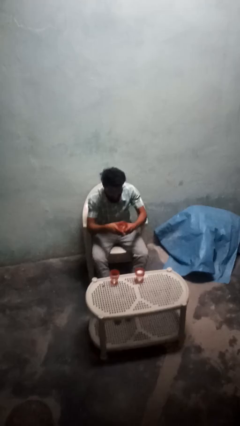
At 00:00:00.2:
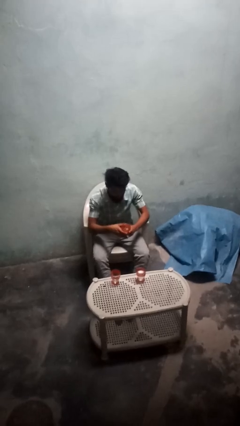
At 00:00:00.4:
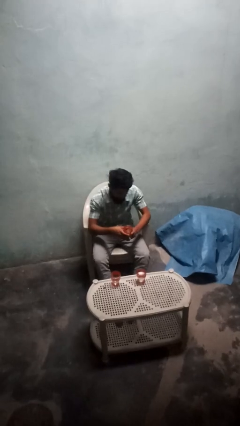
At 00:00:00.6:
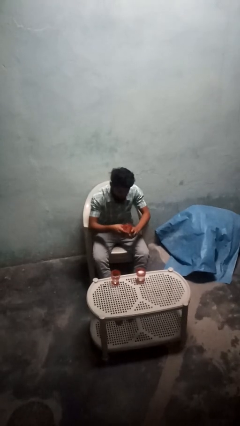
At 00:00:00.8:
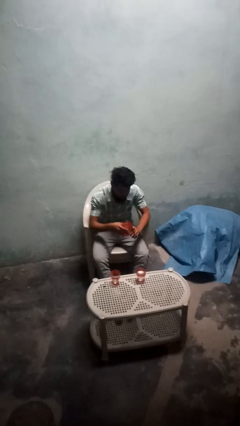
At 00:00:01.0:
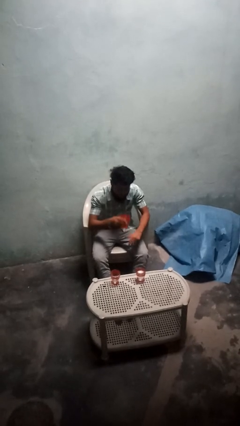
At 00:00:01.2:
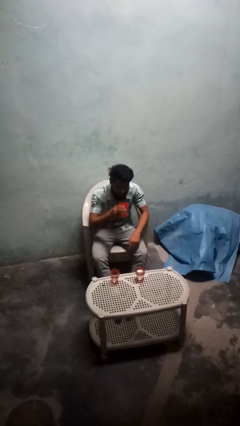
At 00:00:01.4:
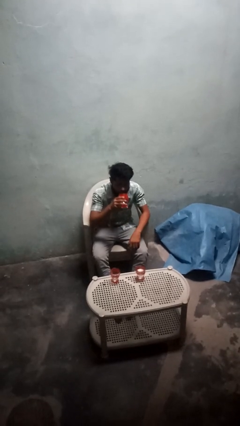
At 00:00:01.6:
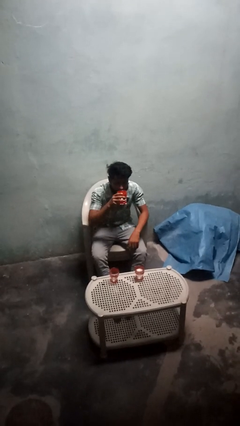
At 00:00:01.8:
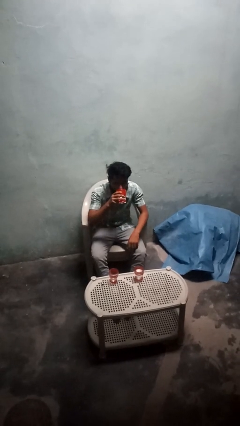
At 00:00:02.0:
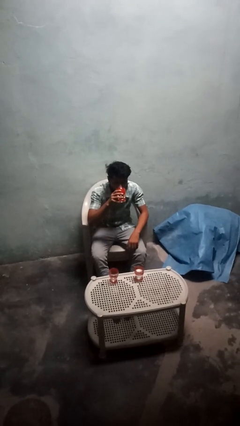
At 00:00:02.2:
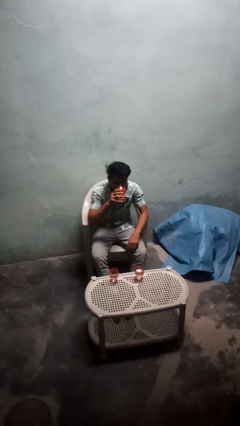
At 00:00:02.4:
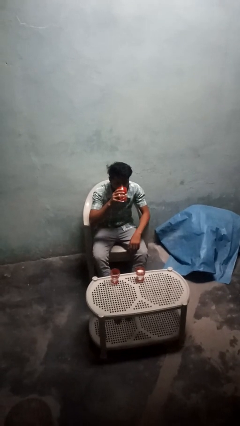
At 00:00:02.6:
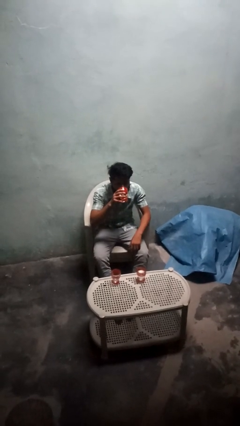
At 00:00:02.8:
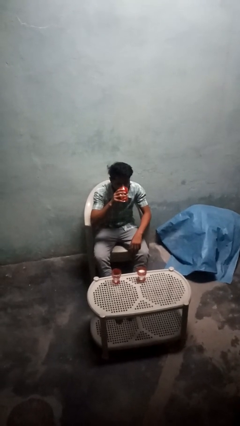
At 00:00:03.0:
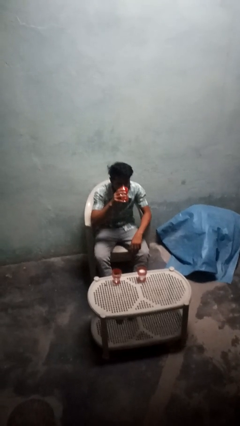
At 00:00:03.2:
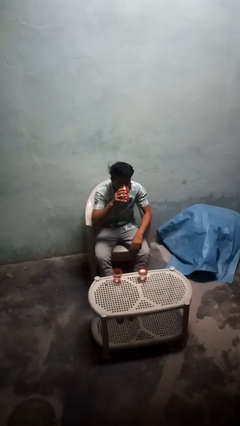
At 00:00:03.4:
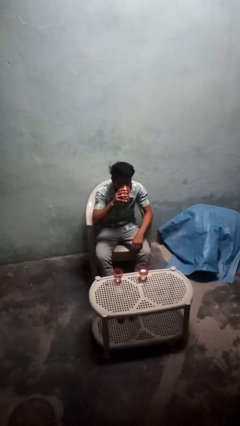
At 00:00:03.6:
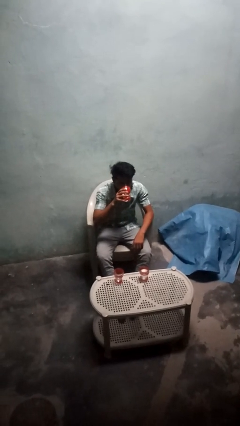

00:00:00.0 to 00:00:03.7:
person drinks from shotglass

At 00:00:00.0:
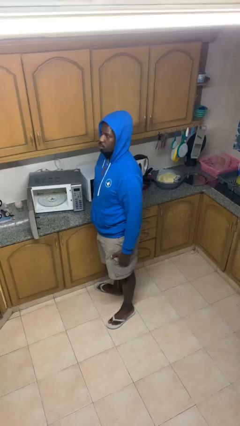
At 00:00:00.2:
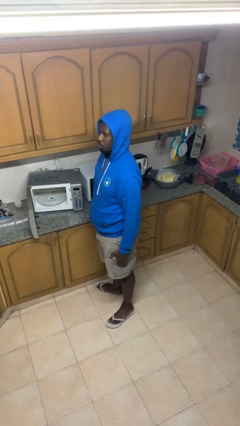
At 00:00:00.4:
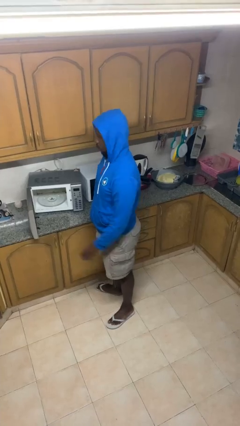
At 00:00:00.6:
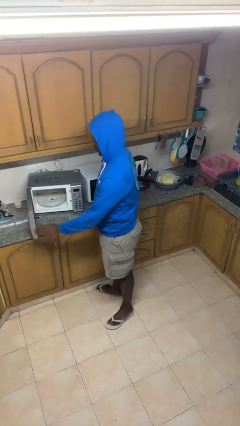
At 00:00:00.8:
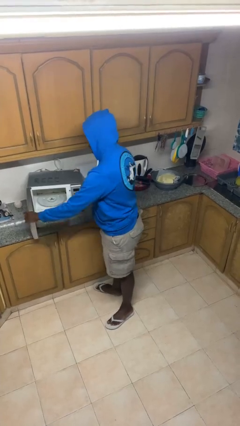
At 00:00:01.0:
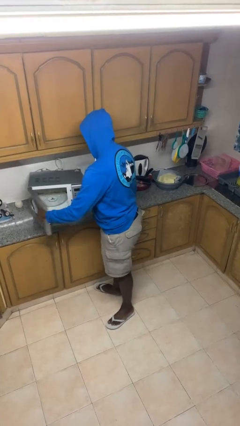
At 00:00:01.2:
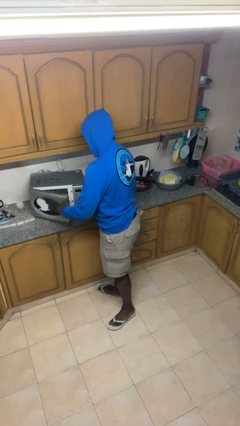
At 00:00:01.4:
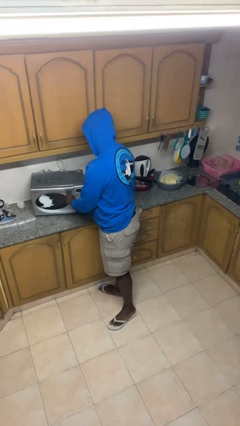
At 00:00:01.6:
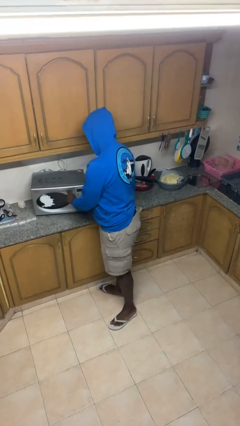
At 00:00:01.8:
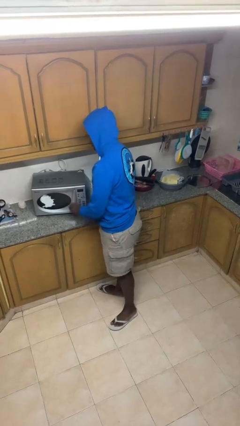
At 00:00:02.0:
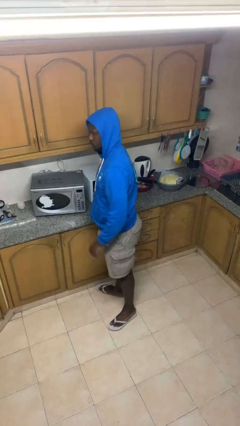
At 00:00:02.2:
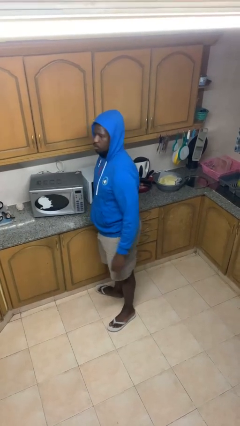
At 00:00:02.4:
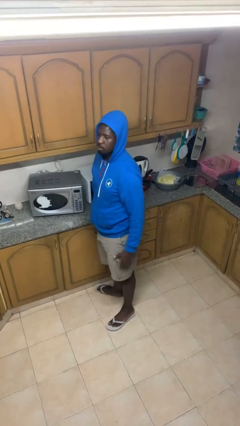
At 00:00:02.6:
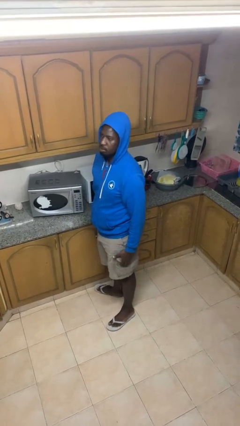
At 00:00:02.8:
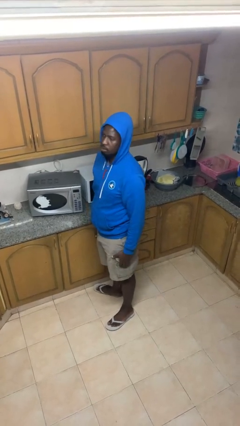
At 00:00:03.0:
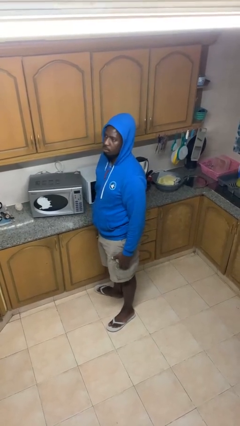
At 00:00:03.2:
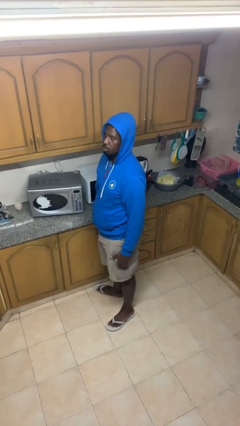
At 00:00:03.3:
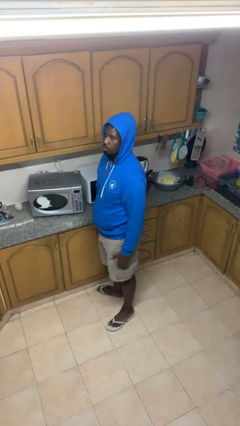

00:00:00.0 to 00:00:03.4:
person closes microwave

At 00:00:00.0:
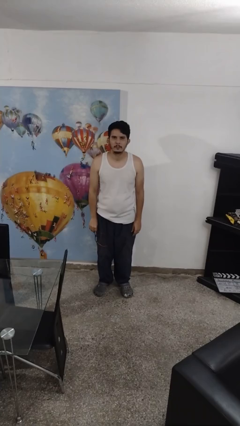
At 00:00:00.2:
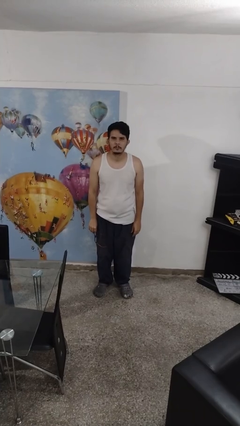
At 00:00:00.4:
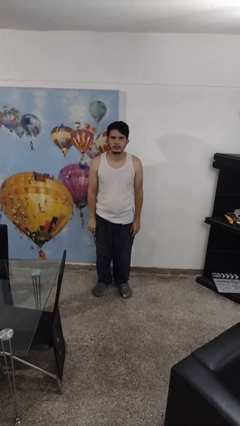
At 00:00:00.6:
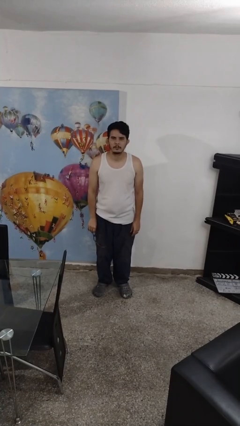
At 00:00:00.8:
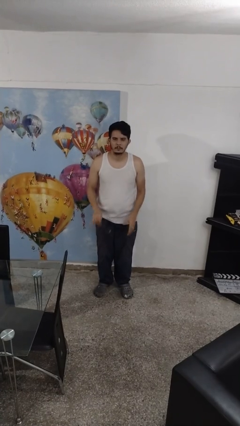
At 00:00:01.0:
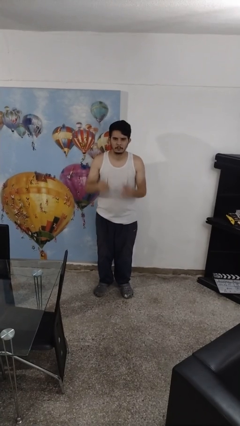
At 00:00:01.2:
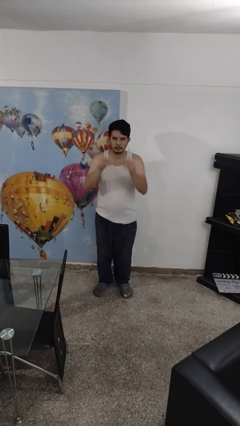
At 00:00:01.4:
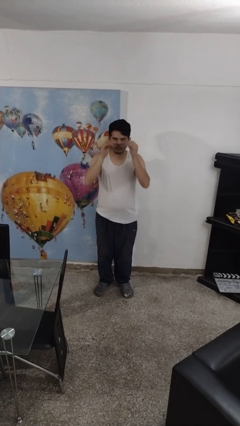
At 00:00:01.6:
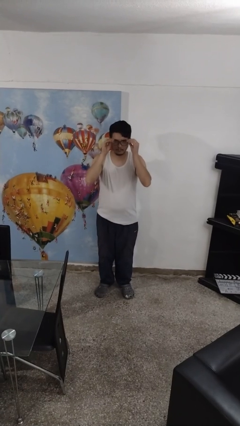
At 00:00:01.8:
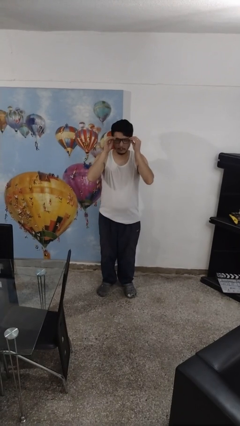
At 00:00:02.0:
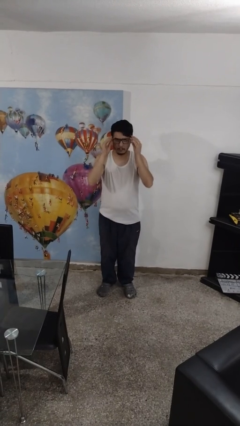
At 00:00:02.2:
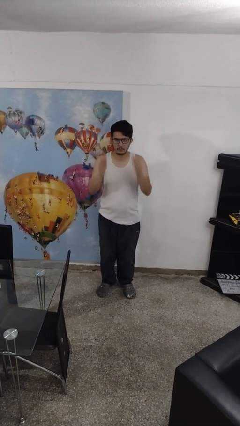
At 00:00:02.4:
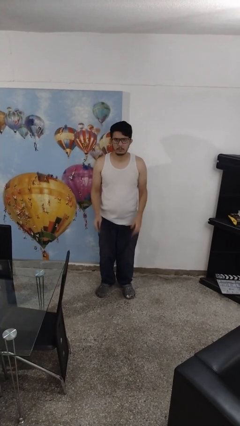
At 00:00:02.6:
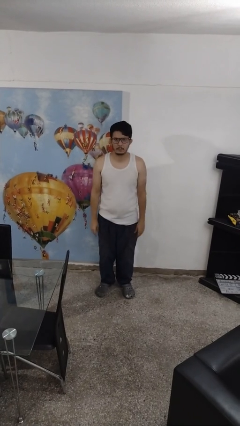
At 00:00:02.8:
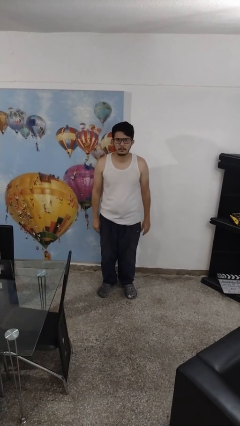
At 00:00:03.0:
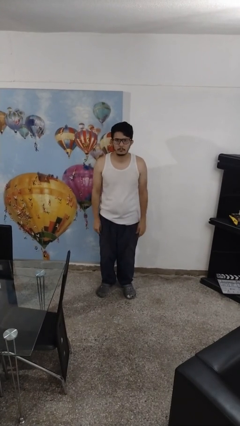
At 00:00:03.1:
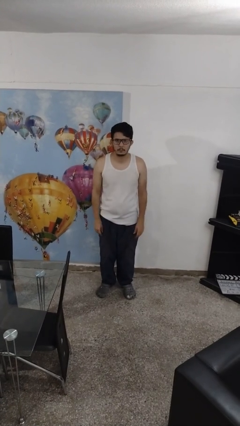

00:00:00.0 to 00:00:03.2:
person puts on glasses

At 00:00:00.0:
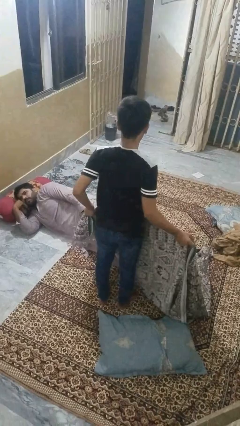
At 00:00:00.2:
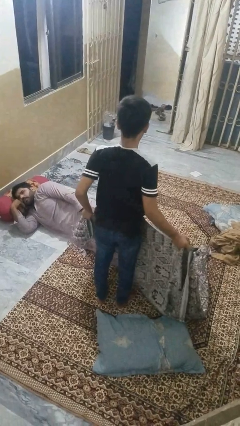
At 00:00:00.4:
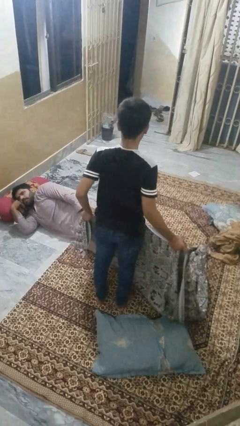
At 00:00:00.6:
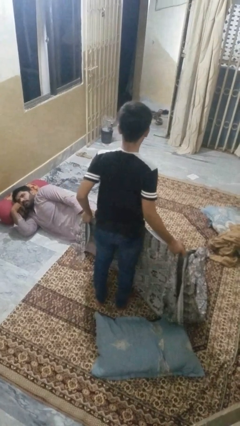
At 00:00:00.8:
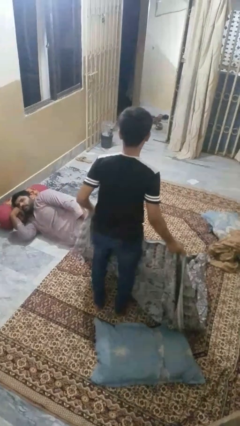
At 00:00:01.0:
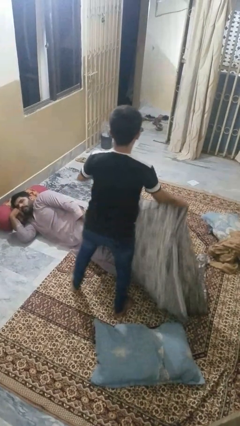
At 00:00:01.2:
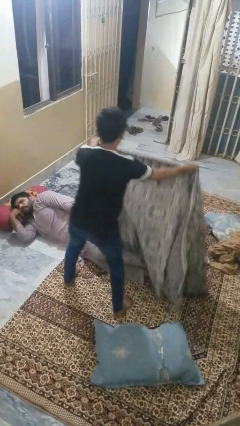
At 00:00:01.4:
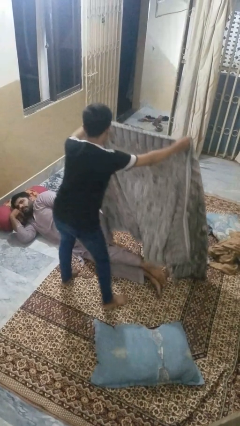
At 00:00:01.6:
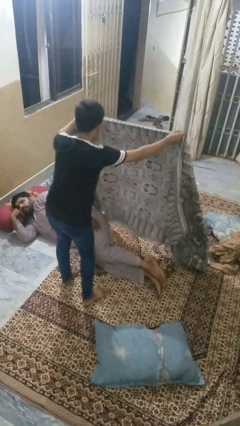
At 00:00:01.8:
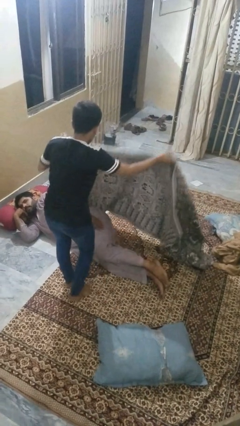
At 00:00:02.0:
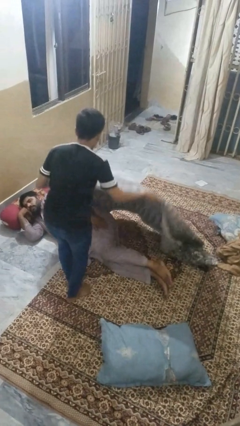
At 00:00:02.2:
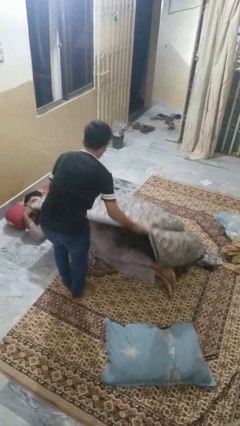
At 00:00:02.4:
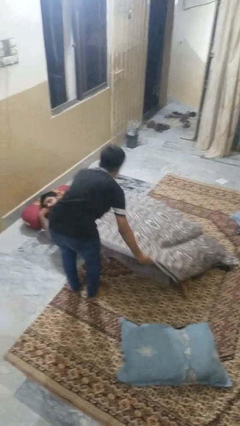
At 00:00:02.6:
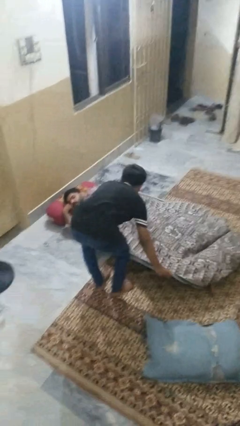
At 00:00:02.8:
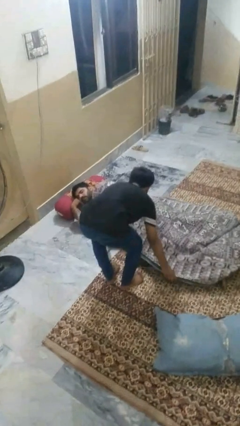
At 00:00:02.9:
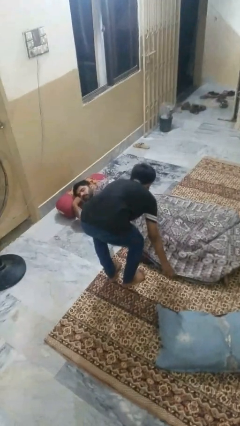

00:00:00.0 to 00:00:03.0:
person covers friend with blanket

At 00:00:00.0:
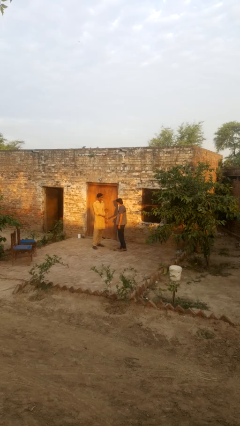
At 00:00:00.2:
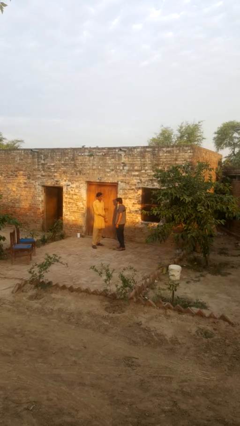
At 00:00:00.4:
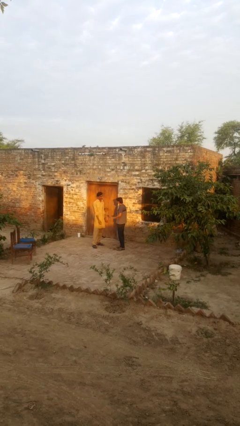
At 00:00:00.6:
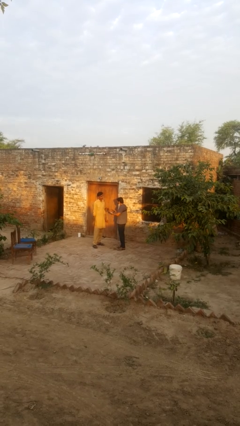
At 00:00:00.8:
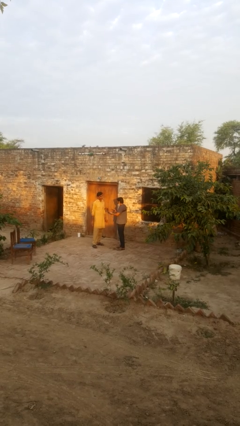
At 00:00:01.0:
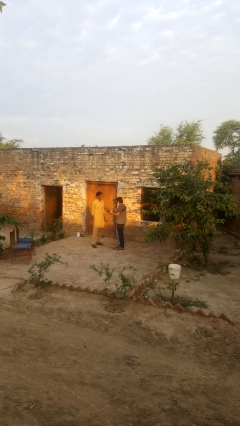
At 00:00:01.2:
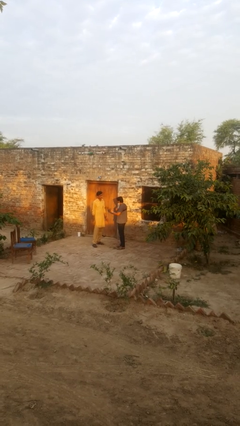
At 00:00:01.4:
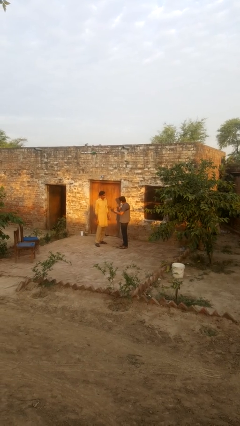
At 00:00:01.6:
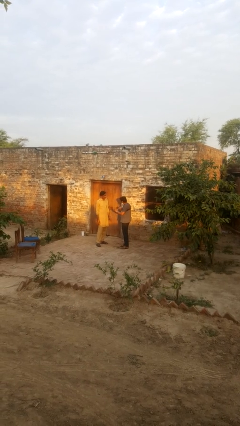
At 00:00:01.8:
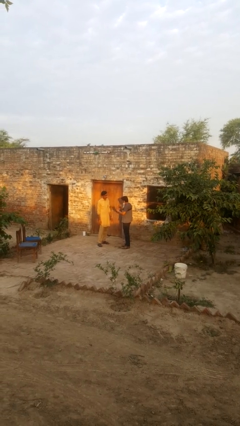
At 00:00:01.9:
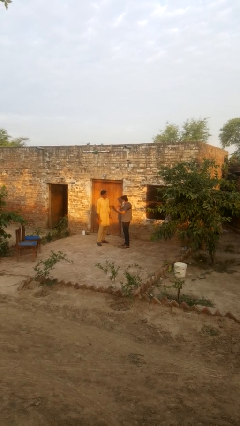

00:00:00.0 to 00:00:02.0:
person highfives hand

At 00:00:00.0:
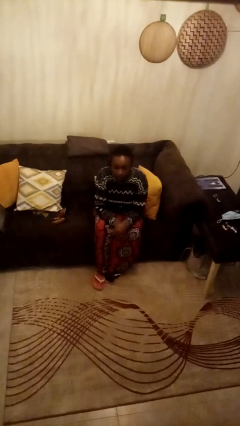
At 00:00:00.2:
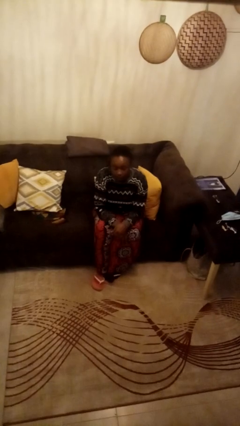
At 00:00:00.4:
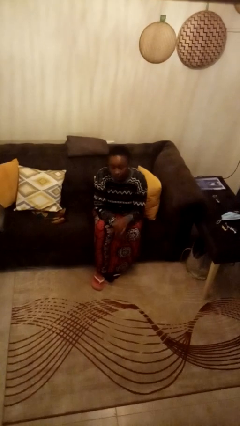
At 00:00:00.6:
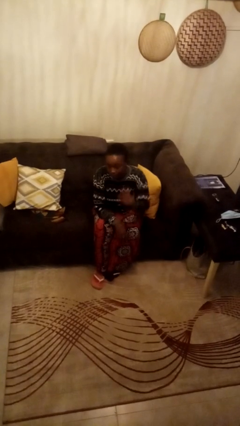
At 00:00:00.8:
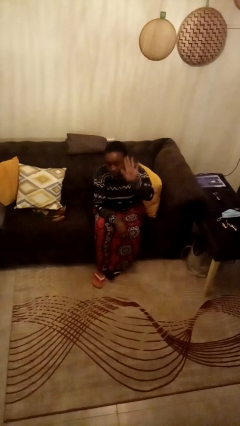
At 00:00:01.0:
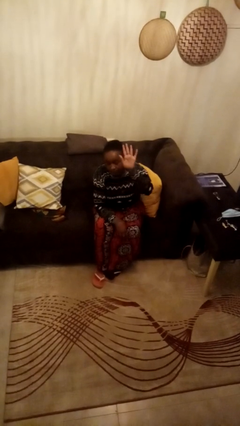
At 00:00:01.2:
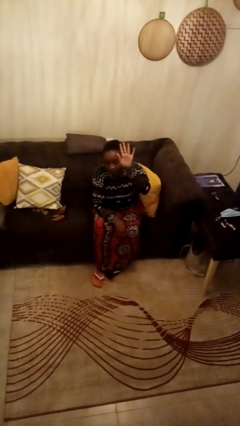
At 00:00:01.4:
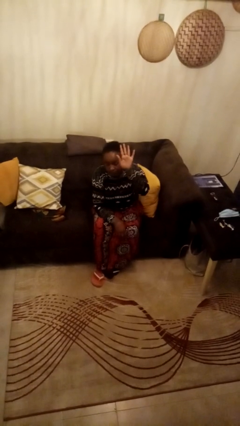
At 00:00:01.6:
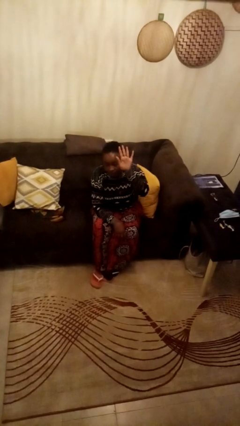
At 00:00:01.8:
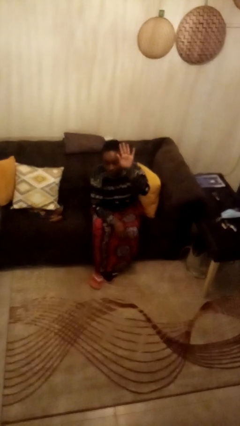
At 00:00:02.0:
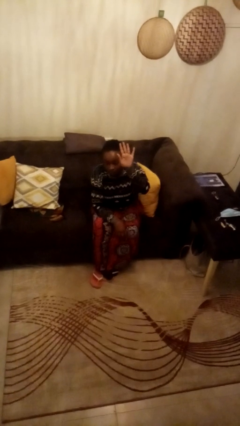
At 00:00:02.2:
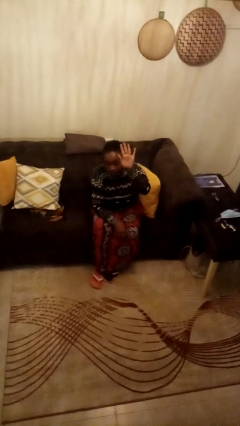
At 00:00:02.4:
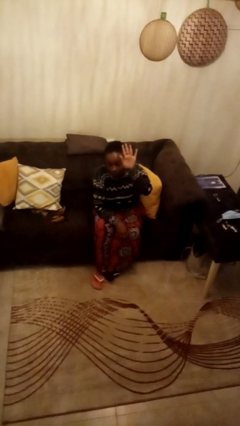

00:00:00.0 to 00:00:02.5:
person gestures raise hand
